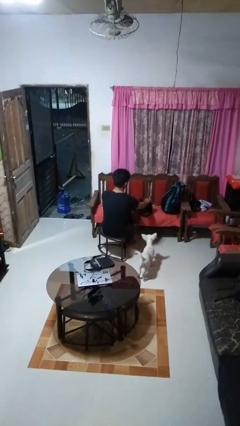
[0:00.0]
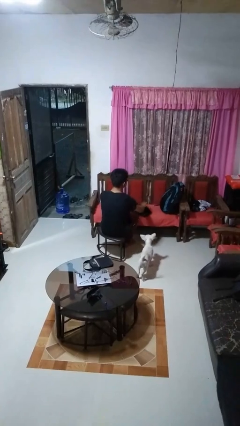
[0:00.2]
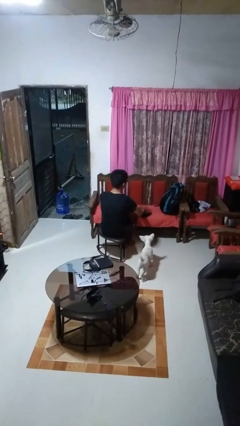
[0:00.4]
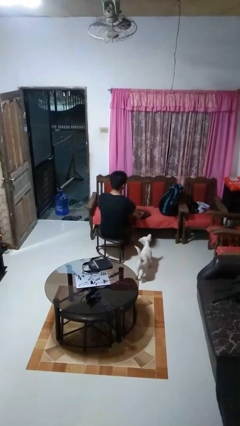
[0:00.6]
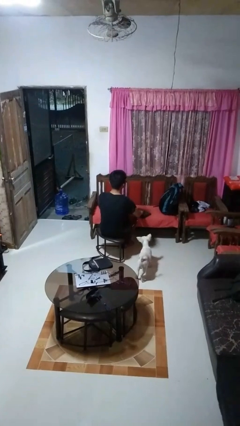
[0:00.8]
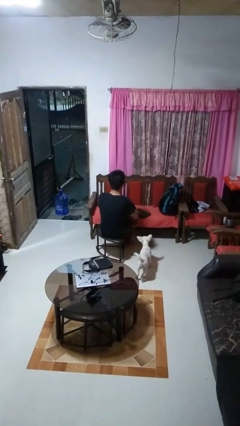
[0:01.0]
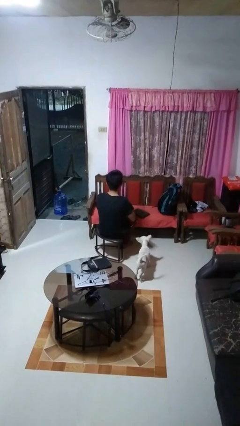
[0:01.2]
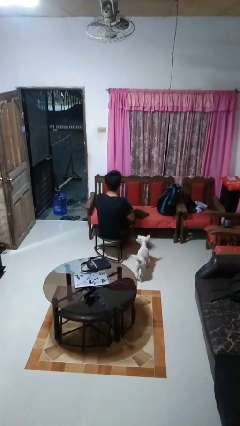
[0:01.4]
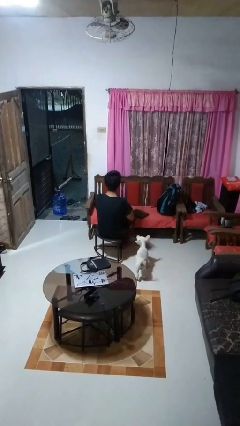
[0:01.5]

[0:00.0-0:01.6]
person closes laptop

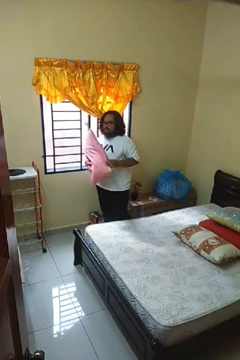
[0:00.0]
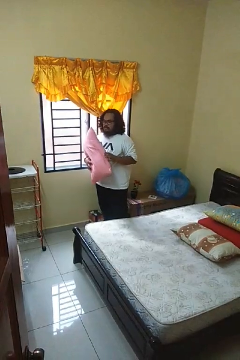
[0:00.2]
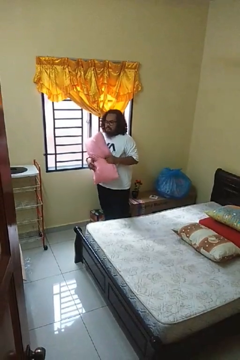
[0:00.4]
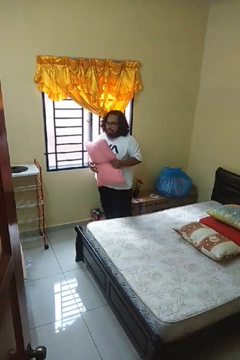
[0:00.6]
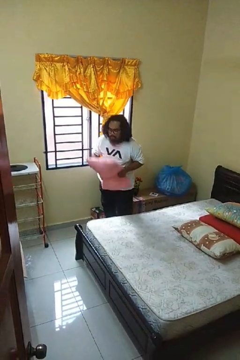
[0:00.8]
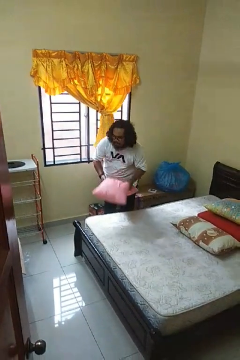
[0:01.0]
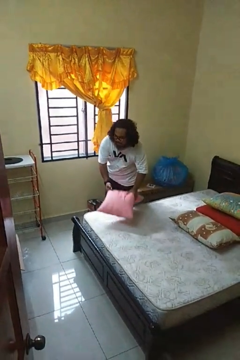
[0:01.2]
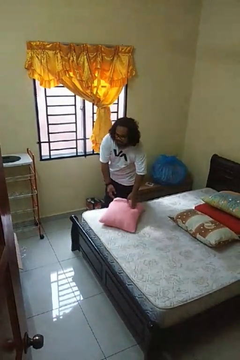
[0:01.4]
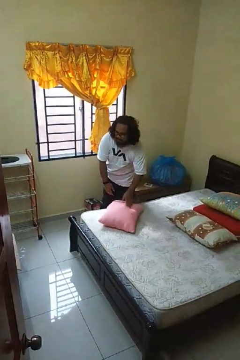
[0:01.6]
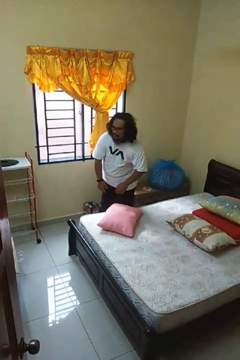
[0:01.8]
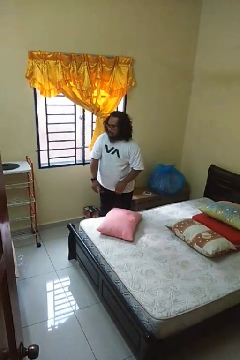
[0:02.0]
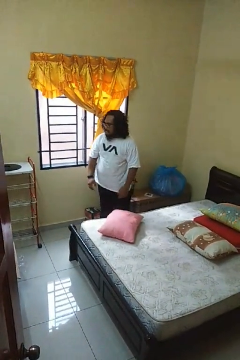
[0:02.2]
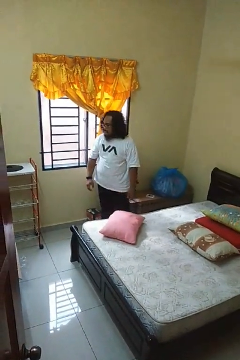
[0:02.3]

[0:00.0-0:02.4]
person puts down object on bed

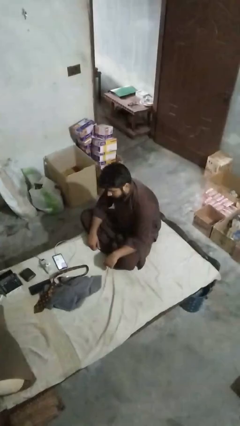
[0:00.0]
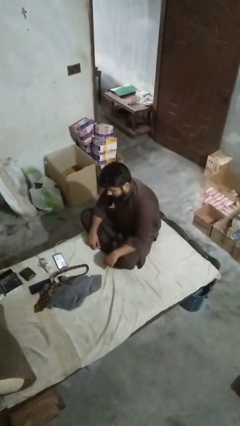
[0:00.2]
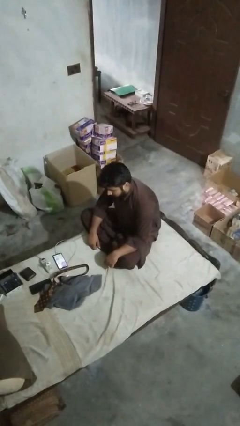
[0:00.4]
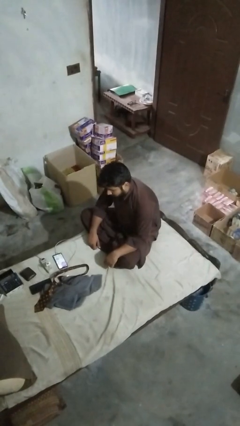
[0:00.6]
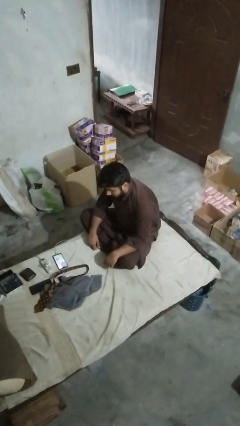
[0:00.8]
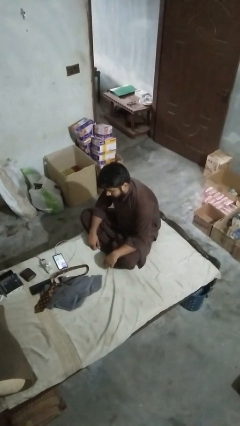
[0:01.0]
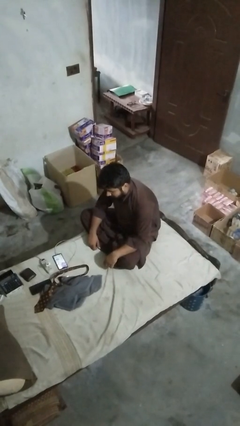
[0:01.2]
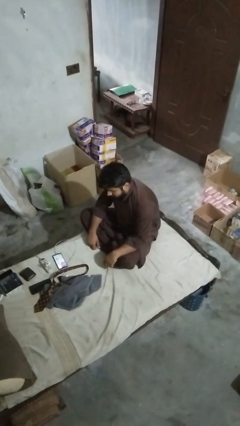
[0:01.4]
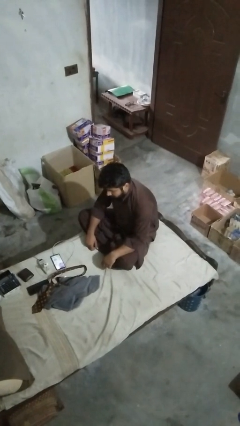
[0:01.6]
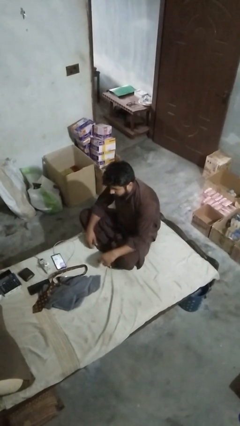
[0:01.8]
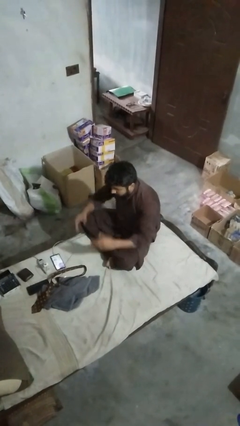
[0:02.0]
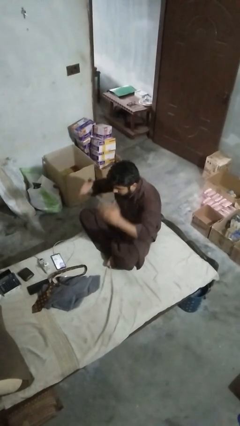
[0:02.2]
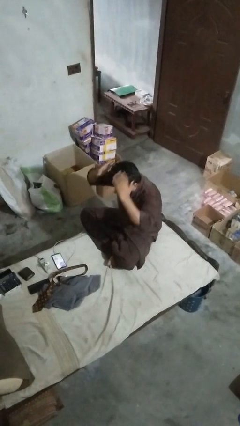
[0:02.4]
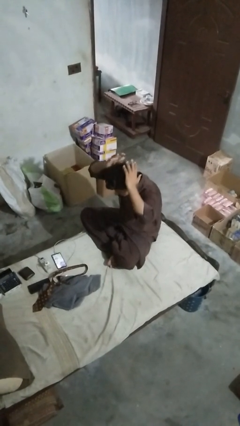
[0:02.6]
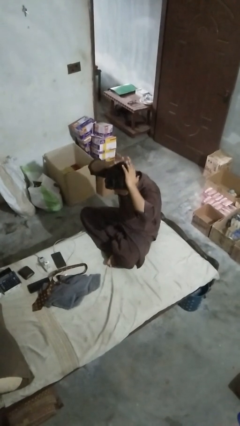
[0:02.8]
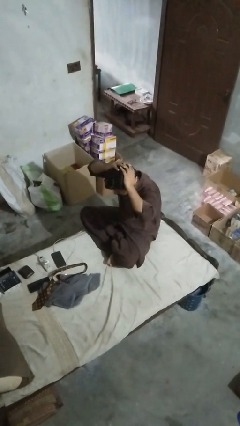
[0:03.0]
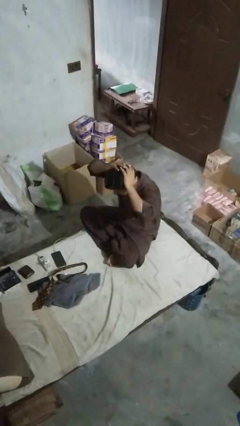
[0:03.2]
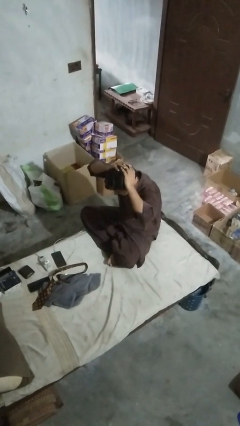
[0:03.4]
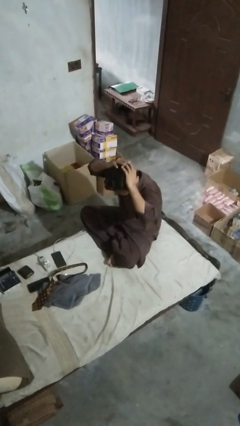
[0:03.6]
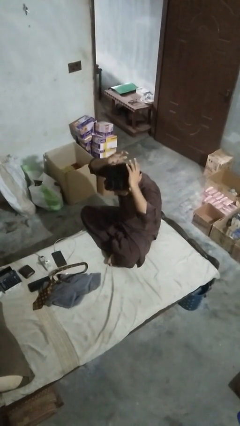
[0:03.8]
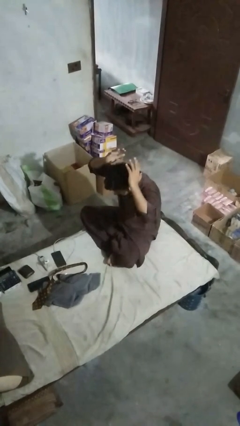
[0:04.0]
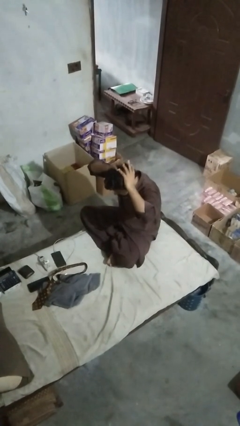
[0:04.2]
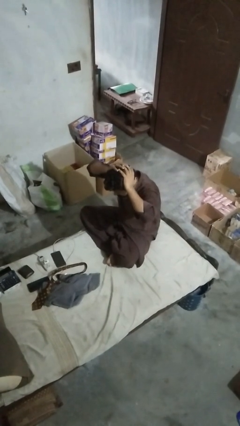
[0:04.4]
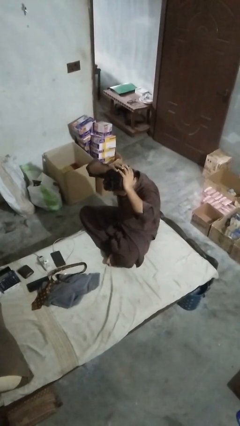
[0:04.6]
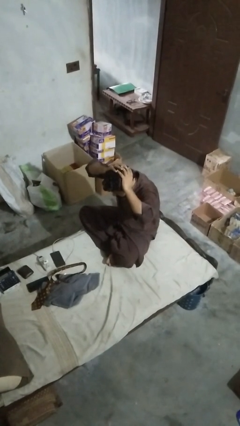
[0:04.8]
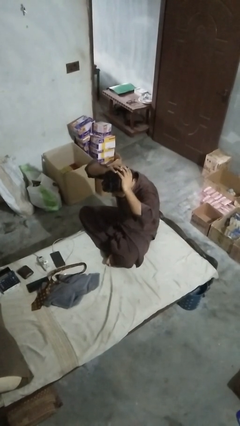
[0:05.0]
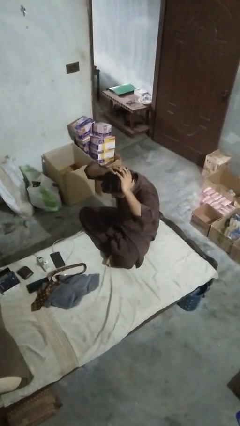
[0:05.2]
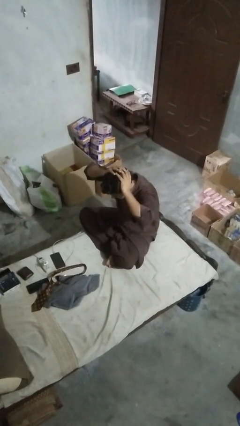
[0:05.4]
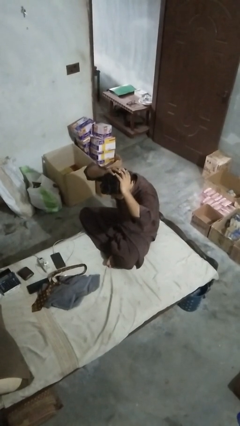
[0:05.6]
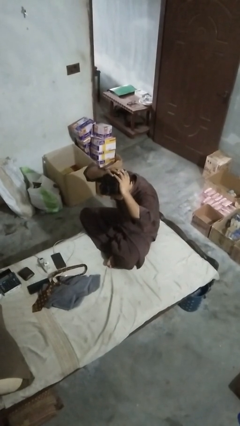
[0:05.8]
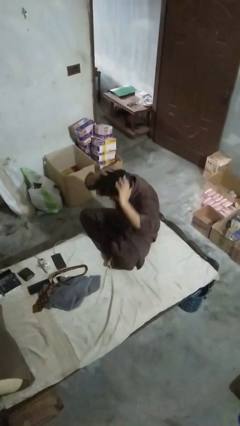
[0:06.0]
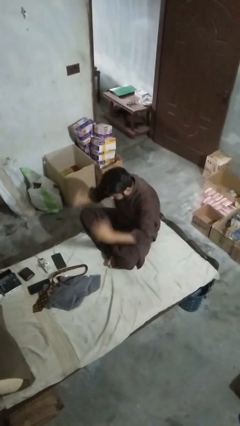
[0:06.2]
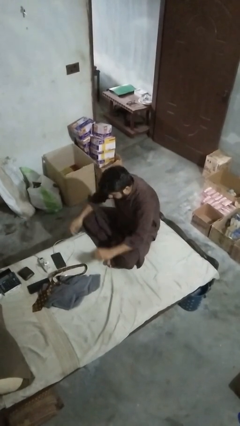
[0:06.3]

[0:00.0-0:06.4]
person pats head

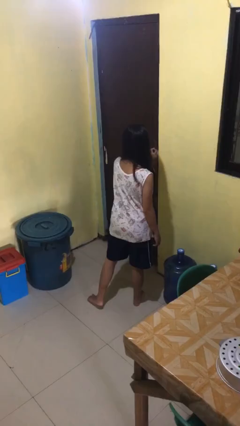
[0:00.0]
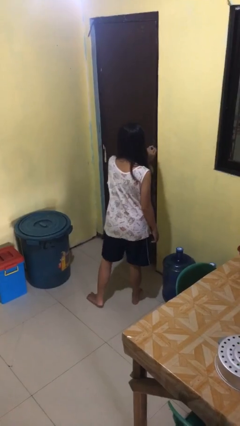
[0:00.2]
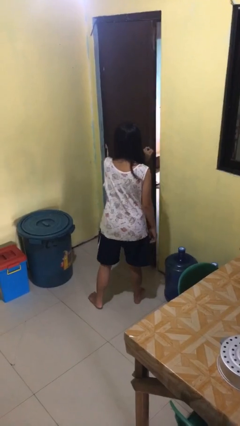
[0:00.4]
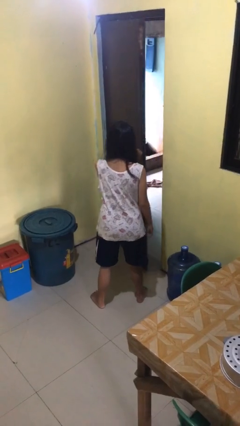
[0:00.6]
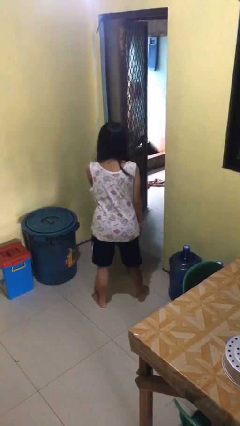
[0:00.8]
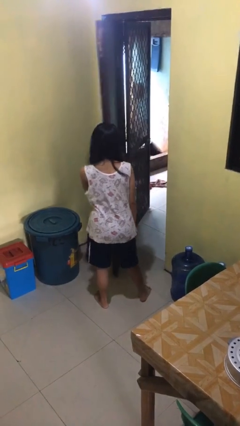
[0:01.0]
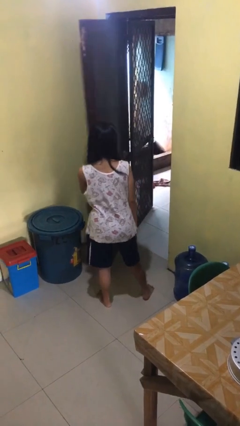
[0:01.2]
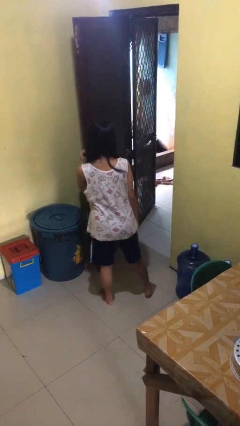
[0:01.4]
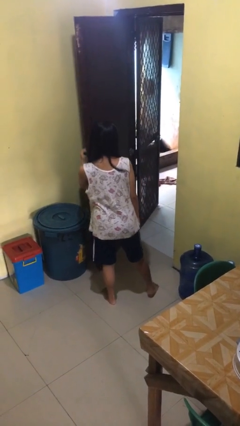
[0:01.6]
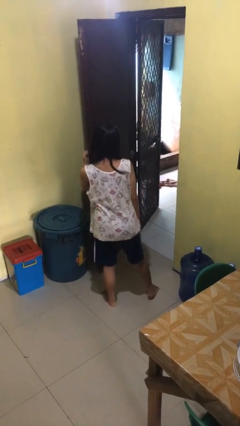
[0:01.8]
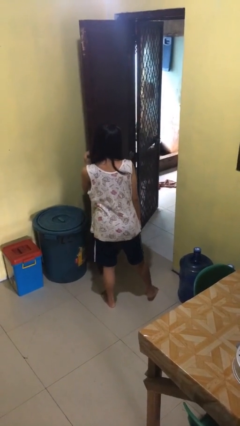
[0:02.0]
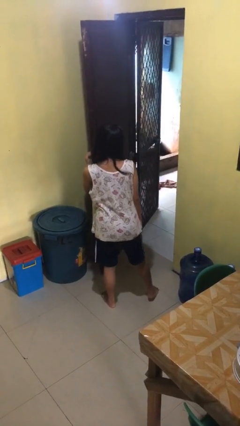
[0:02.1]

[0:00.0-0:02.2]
person opens facility door

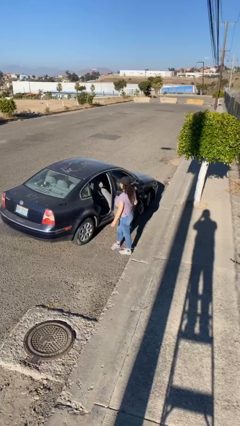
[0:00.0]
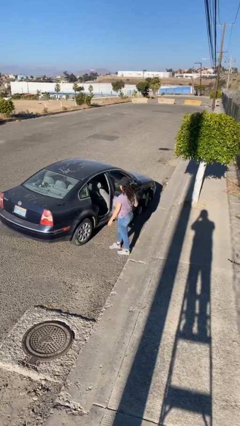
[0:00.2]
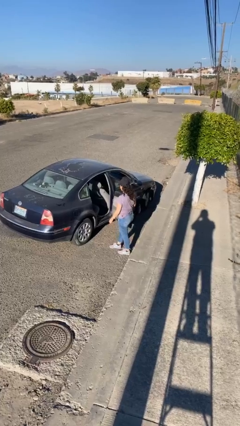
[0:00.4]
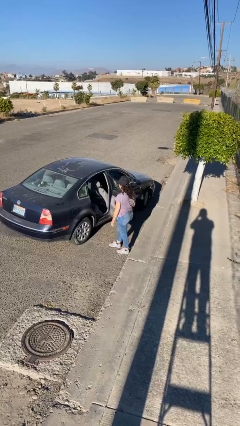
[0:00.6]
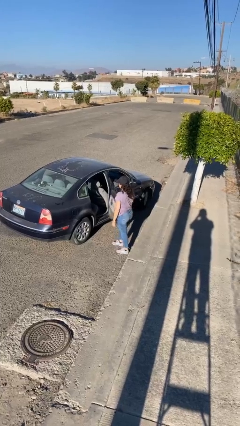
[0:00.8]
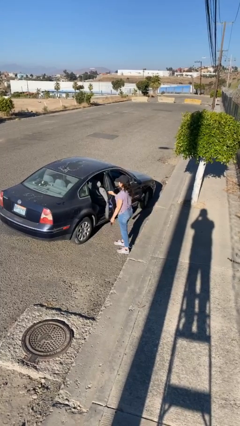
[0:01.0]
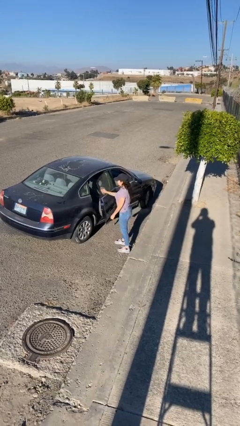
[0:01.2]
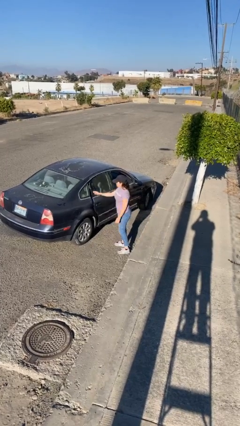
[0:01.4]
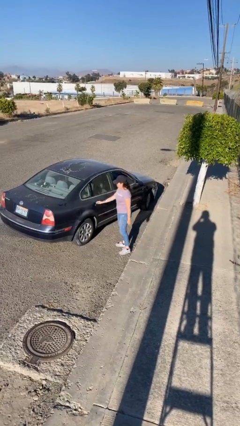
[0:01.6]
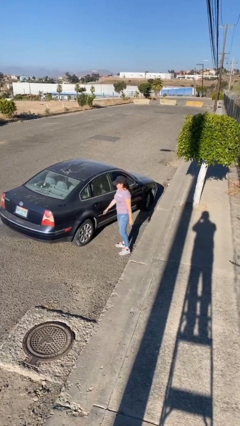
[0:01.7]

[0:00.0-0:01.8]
person closes car door

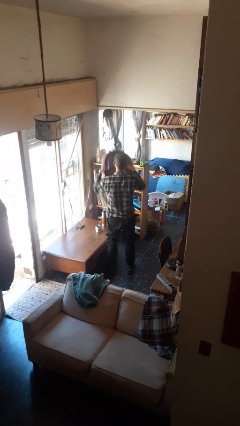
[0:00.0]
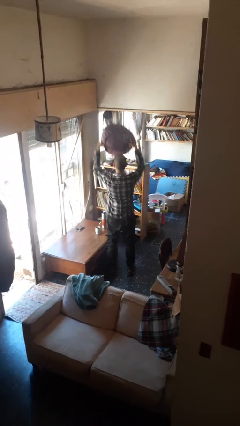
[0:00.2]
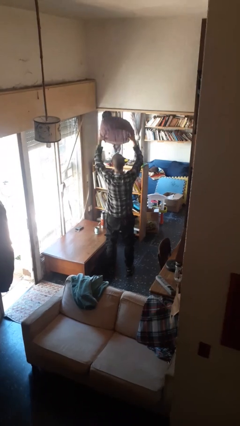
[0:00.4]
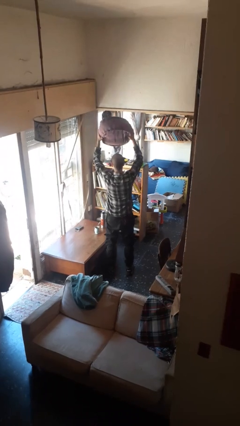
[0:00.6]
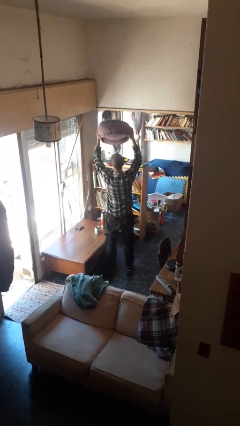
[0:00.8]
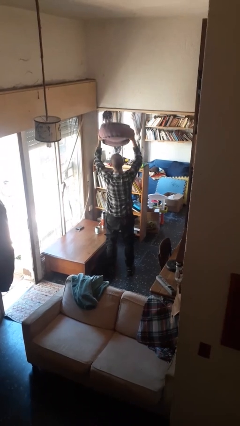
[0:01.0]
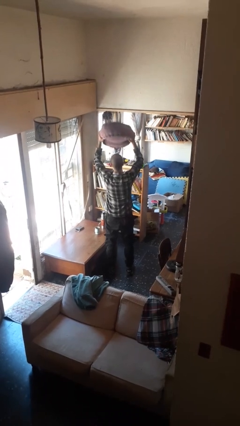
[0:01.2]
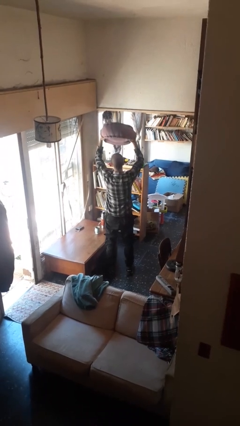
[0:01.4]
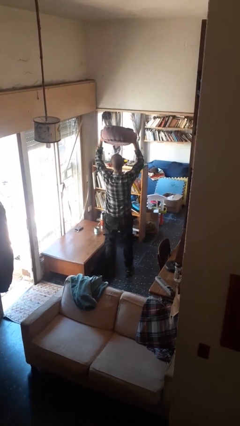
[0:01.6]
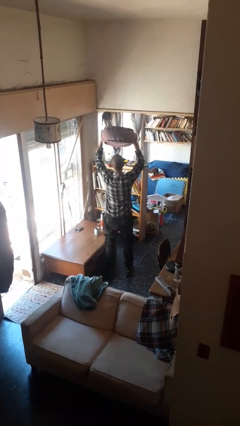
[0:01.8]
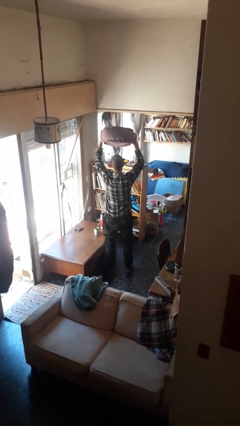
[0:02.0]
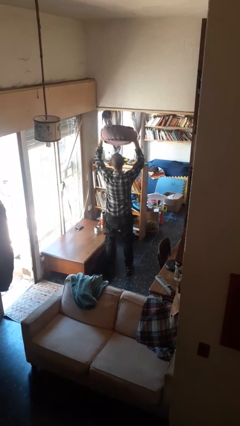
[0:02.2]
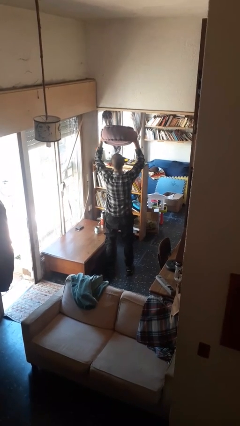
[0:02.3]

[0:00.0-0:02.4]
person holds object above head

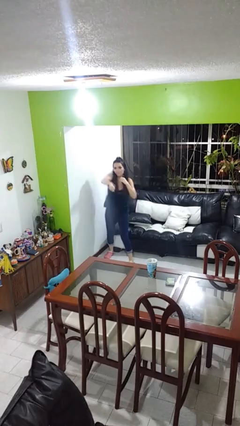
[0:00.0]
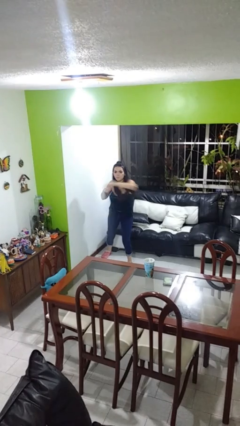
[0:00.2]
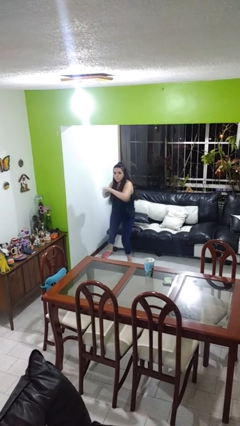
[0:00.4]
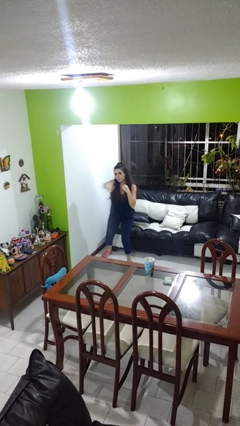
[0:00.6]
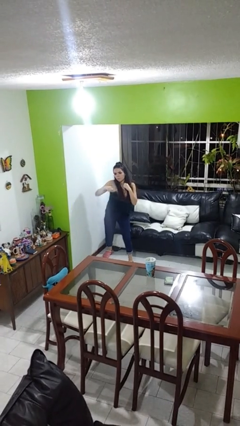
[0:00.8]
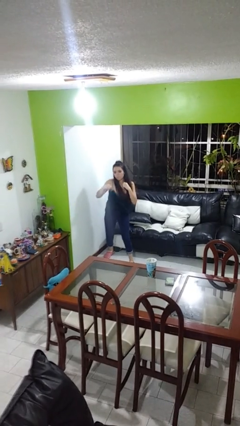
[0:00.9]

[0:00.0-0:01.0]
person punches
